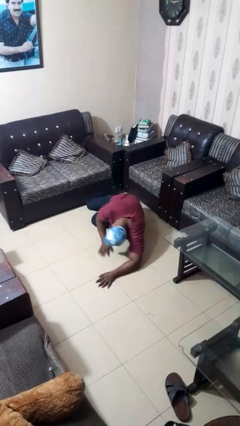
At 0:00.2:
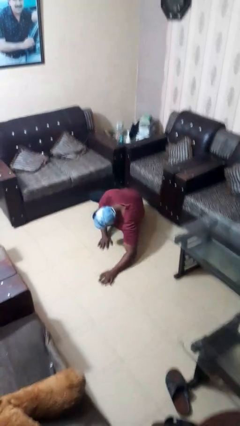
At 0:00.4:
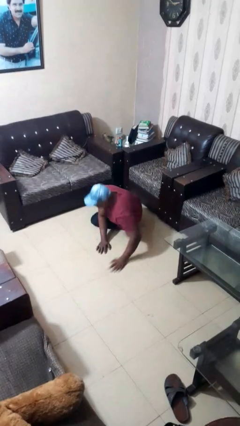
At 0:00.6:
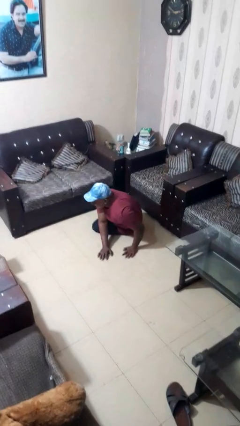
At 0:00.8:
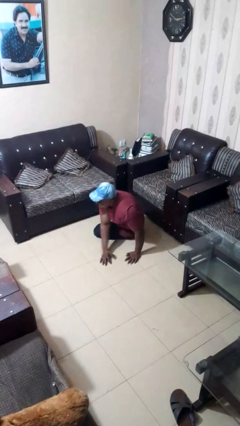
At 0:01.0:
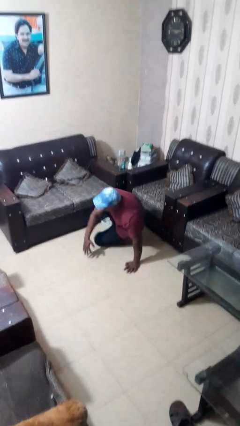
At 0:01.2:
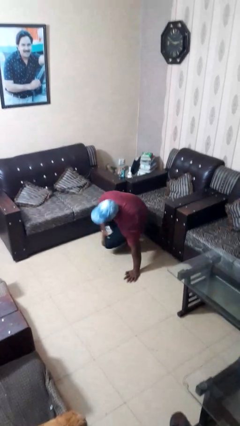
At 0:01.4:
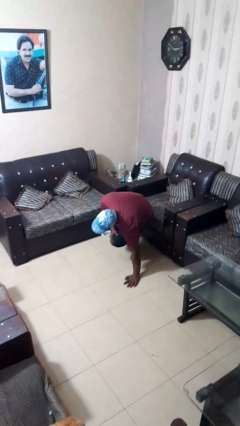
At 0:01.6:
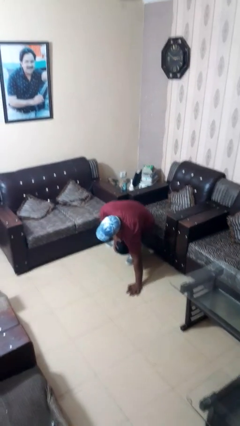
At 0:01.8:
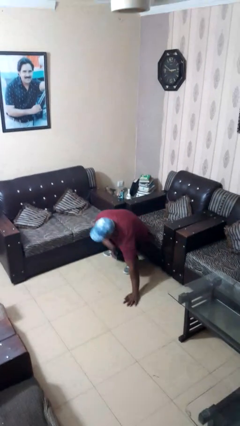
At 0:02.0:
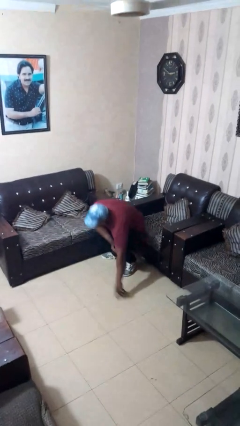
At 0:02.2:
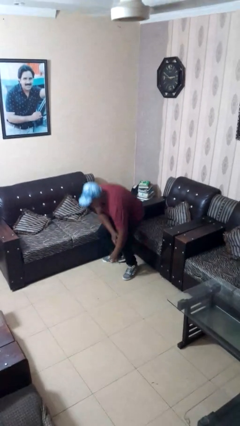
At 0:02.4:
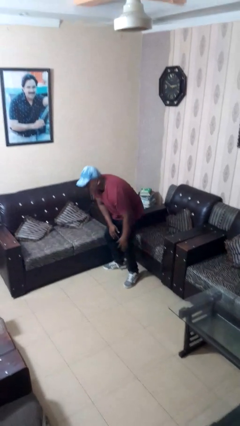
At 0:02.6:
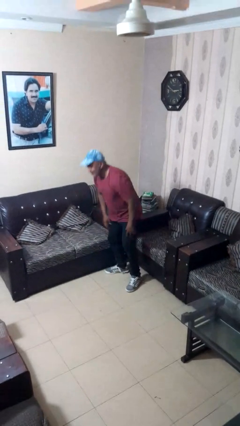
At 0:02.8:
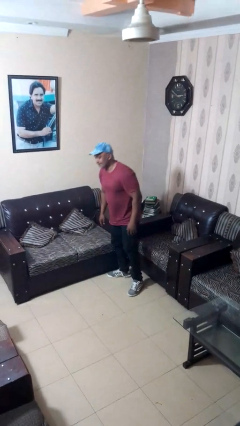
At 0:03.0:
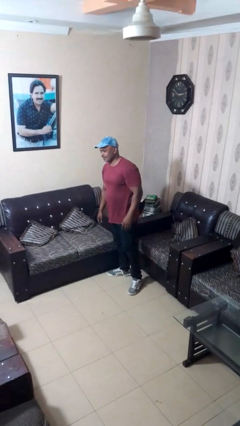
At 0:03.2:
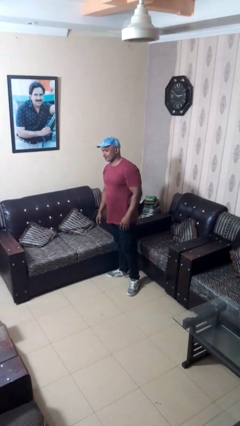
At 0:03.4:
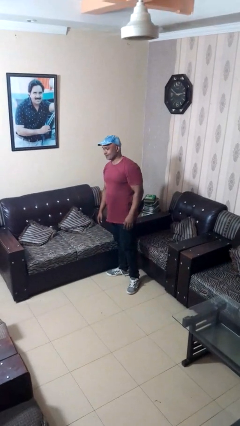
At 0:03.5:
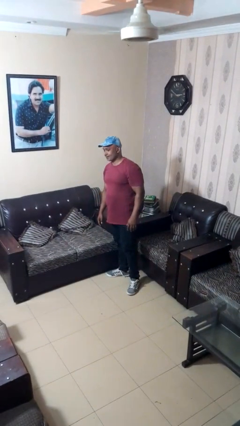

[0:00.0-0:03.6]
person stands up from floor

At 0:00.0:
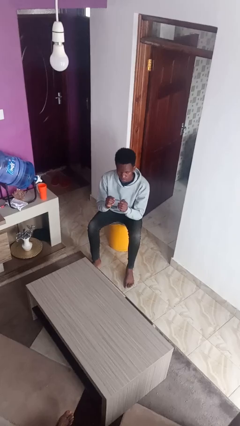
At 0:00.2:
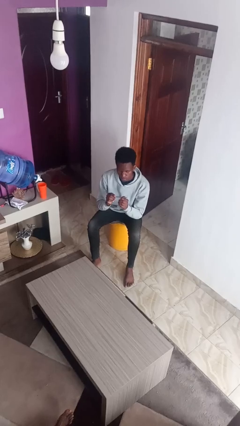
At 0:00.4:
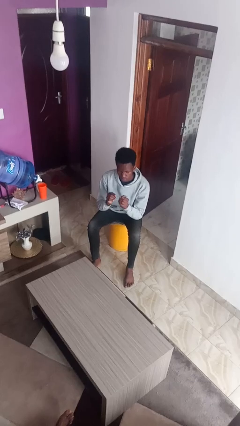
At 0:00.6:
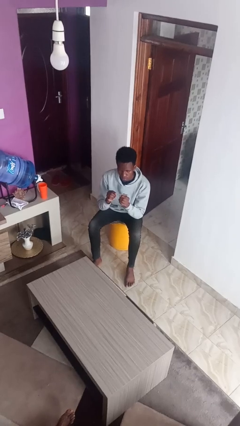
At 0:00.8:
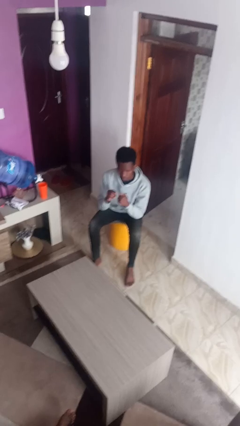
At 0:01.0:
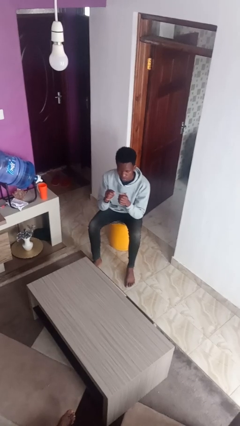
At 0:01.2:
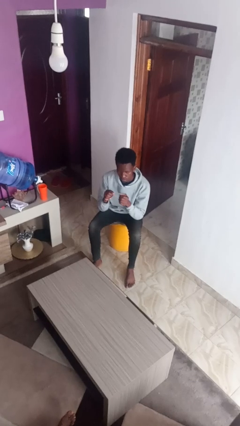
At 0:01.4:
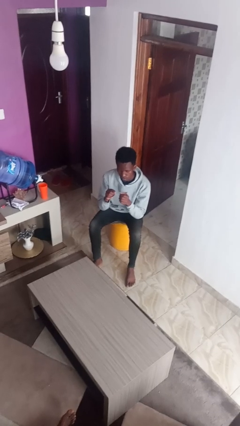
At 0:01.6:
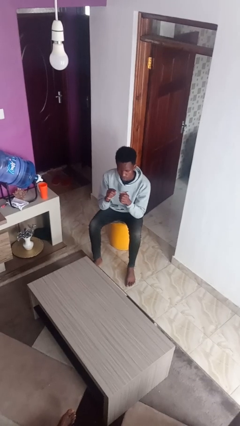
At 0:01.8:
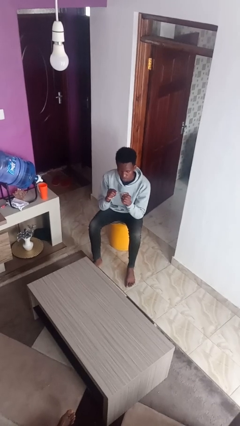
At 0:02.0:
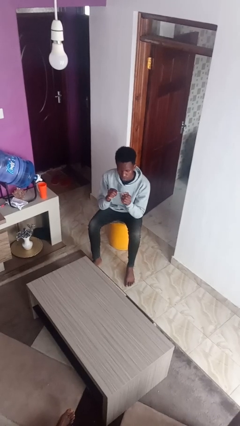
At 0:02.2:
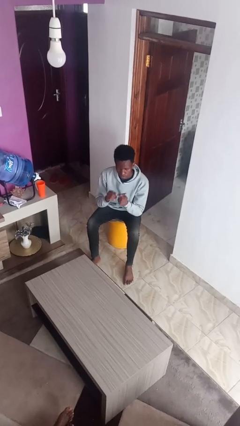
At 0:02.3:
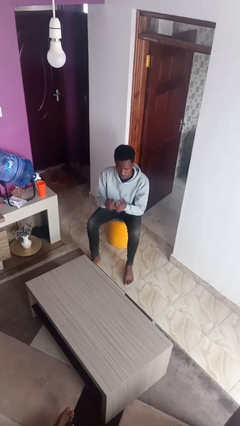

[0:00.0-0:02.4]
person files fingernails

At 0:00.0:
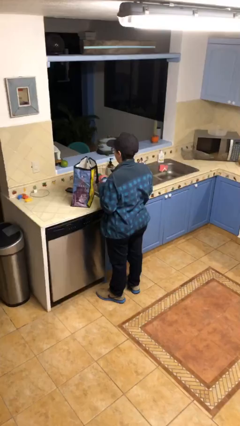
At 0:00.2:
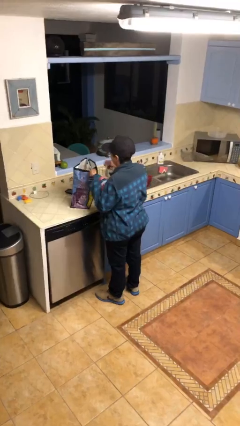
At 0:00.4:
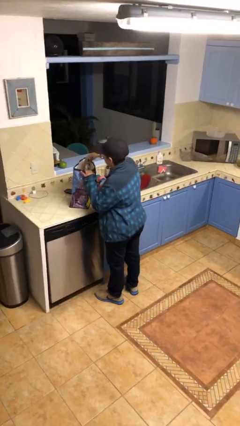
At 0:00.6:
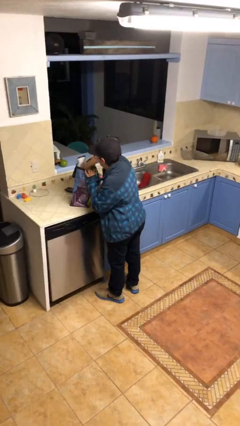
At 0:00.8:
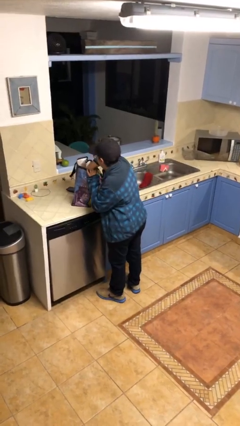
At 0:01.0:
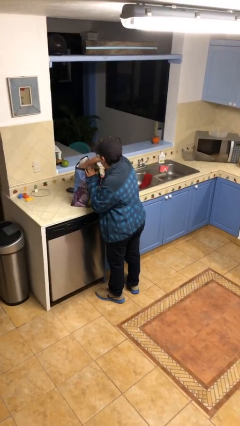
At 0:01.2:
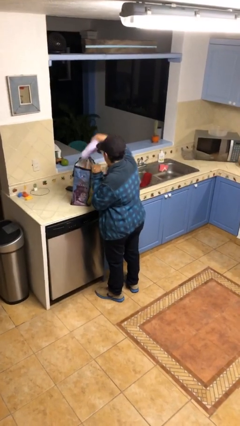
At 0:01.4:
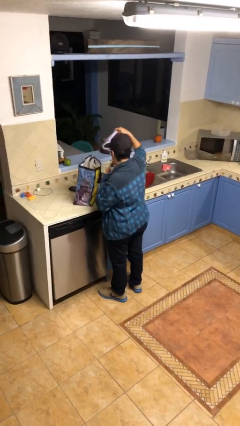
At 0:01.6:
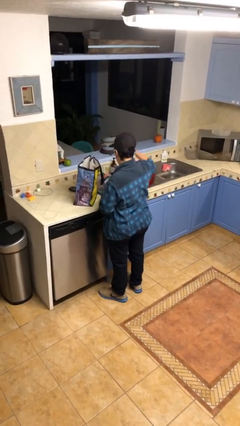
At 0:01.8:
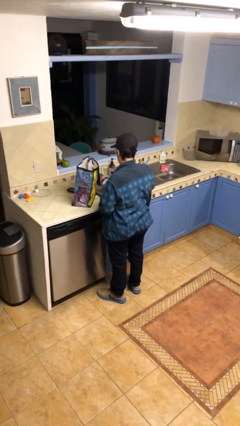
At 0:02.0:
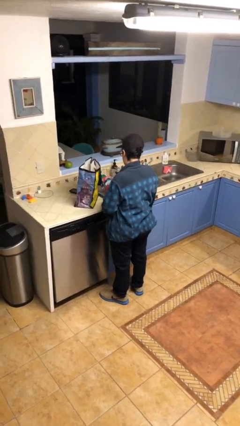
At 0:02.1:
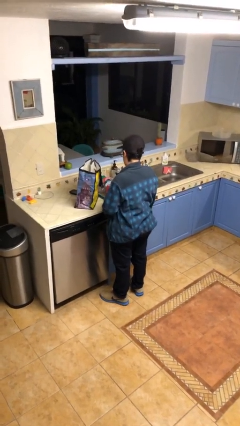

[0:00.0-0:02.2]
person takes object from bag

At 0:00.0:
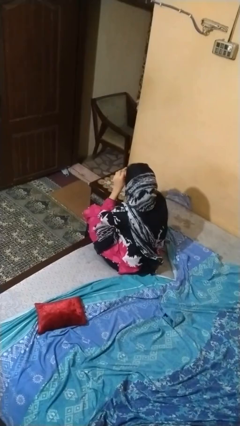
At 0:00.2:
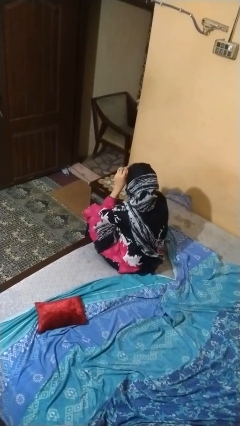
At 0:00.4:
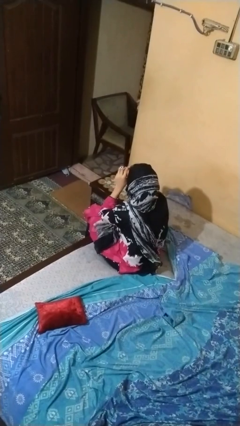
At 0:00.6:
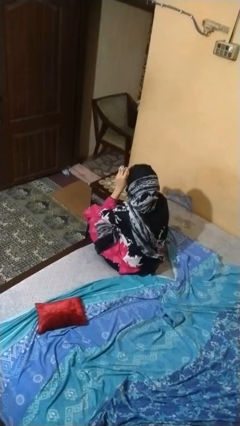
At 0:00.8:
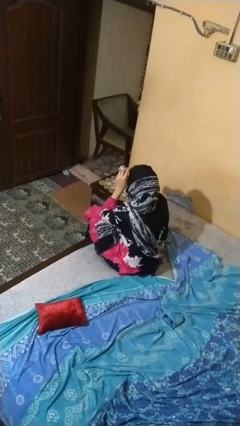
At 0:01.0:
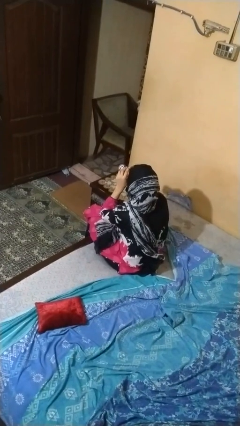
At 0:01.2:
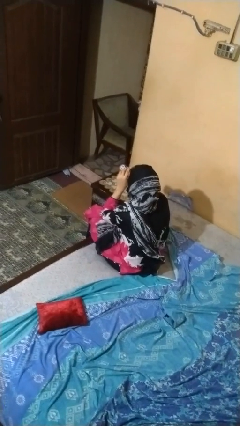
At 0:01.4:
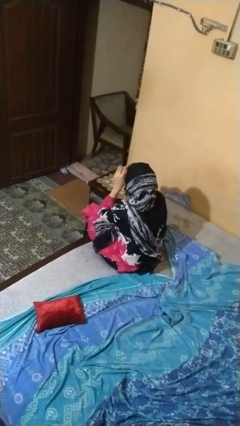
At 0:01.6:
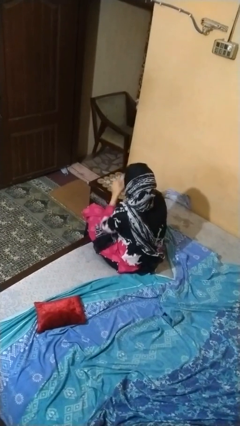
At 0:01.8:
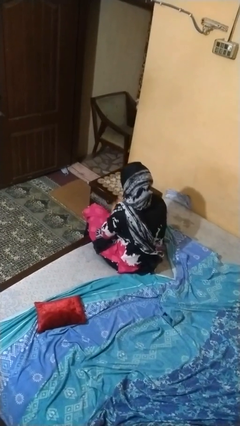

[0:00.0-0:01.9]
person drinks from beverage can

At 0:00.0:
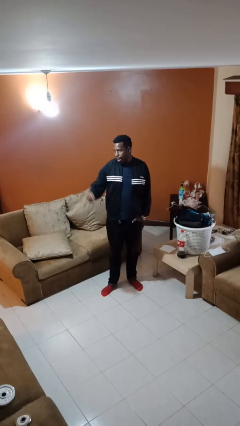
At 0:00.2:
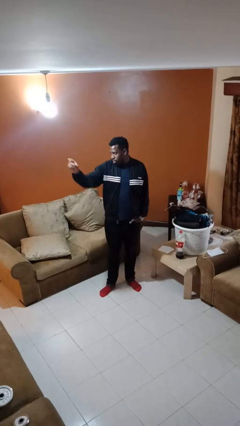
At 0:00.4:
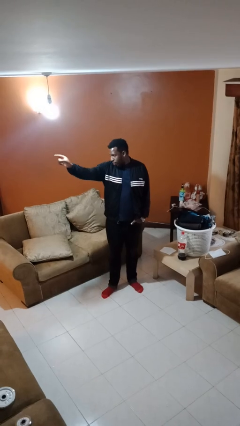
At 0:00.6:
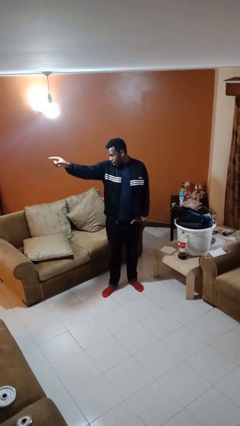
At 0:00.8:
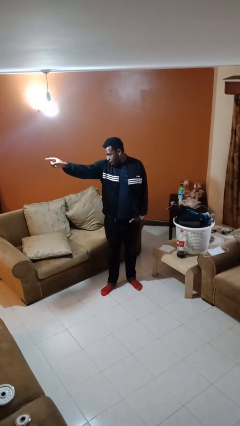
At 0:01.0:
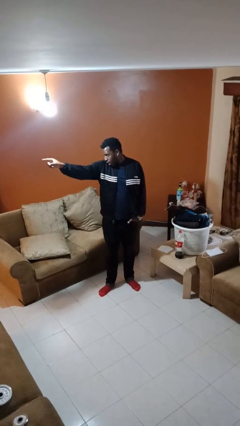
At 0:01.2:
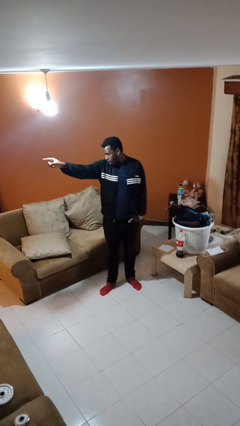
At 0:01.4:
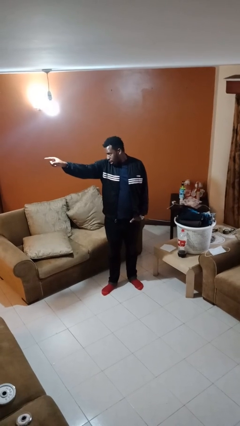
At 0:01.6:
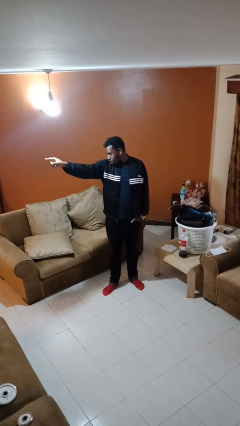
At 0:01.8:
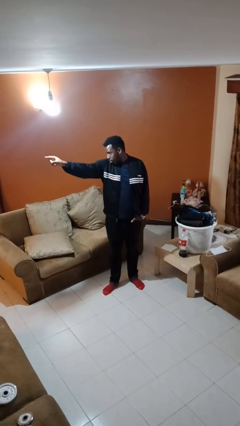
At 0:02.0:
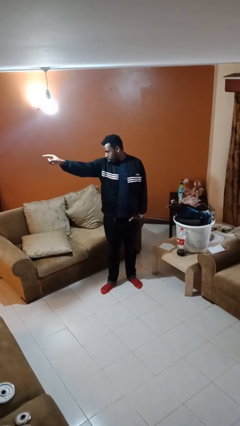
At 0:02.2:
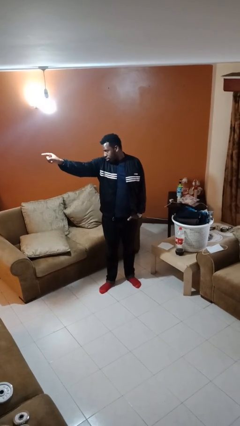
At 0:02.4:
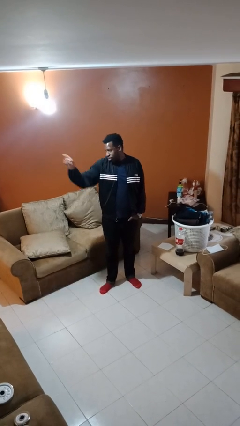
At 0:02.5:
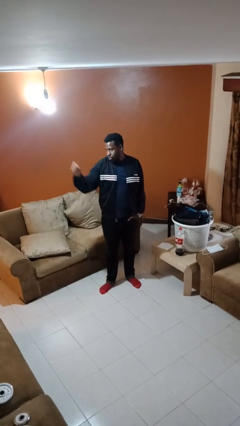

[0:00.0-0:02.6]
person points at person

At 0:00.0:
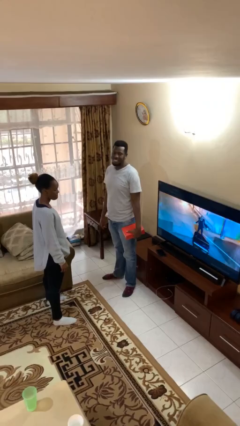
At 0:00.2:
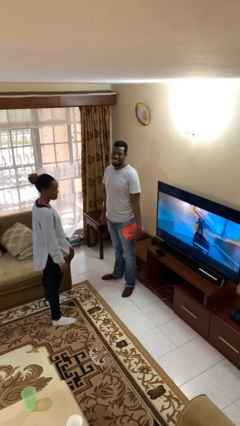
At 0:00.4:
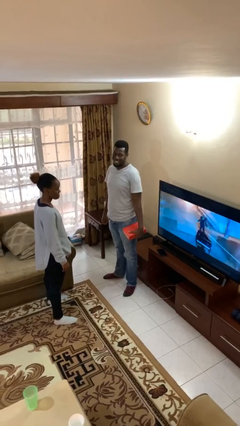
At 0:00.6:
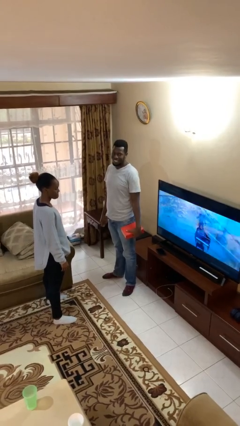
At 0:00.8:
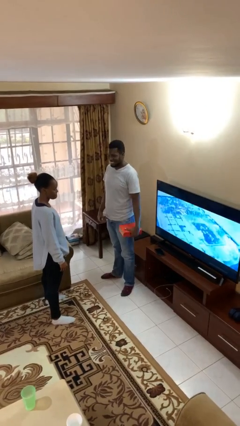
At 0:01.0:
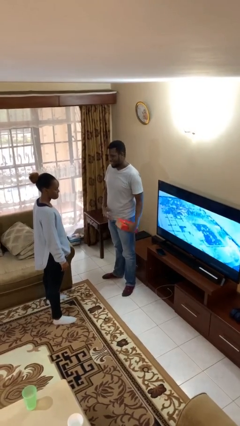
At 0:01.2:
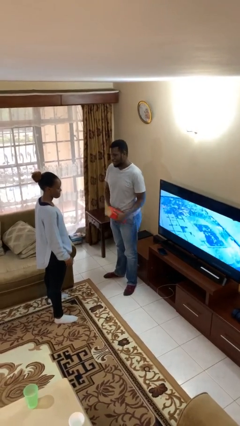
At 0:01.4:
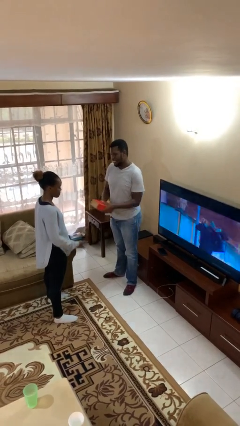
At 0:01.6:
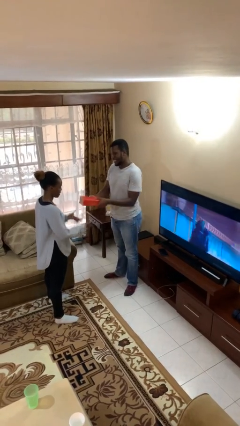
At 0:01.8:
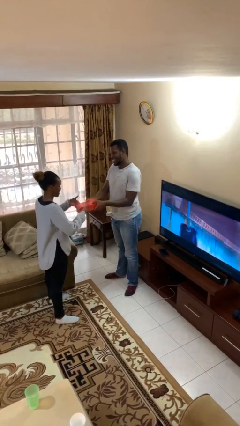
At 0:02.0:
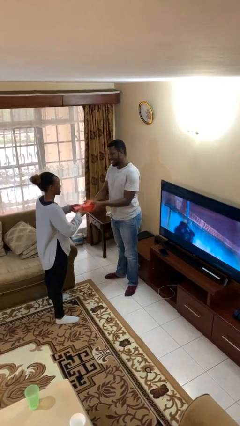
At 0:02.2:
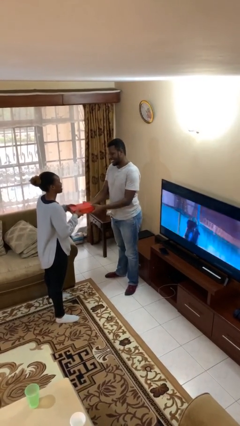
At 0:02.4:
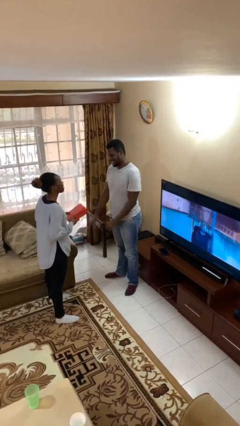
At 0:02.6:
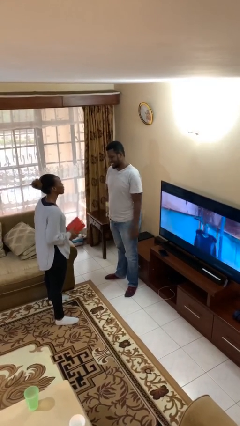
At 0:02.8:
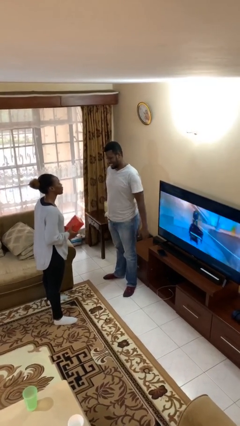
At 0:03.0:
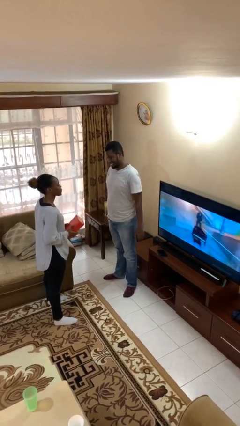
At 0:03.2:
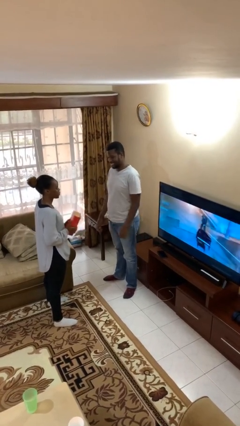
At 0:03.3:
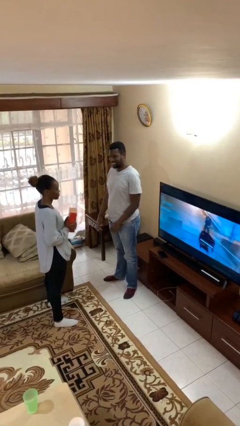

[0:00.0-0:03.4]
person transfers object to person

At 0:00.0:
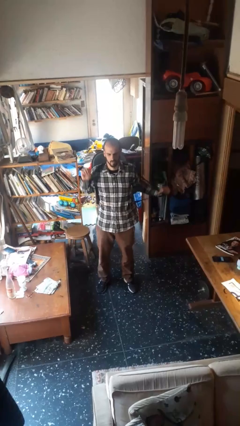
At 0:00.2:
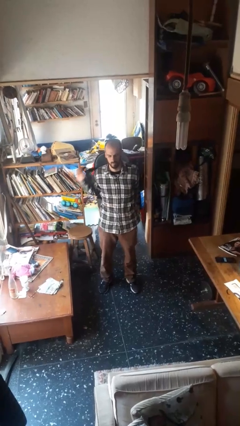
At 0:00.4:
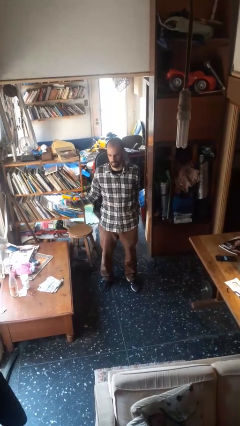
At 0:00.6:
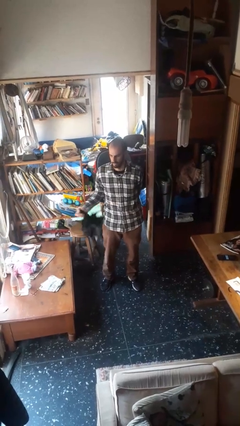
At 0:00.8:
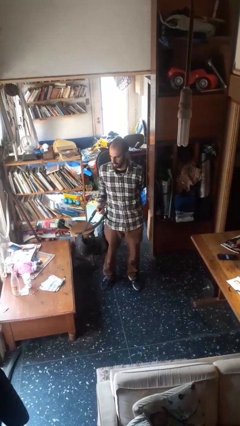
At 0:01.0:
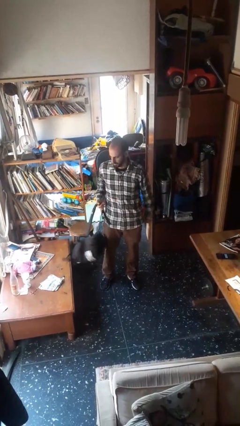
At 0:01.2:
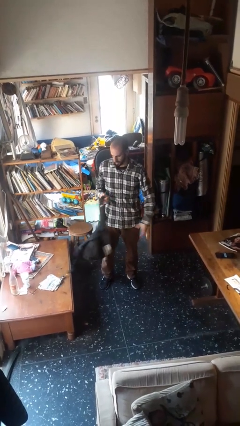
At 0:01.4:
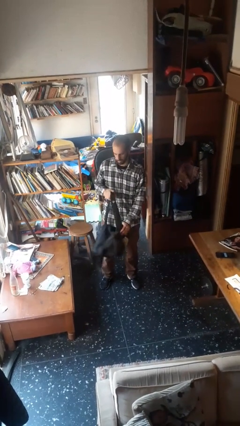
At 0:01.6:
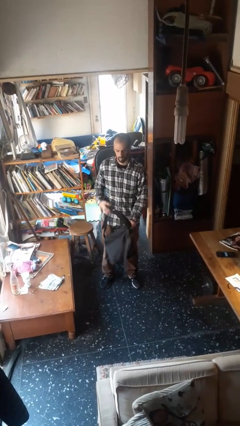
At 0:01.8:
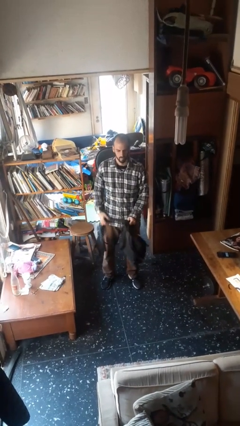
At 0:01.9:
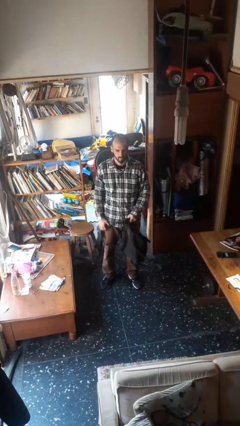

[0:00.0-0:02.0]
person takes off backpack
